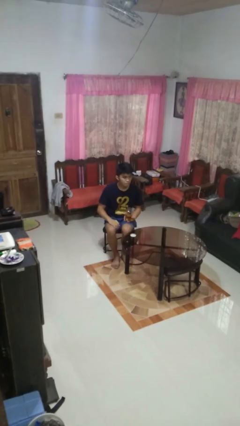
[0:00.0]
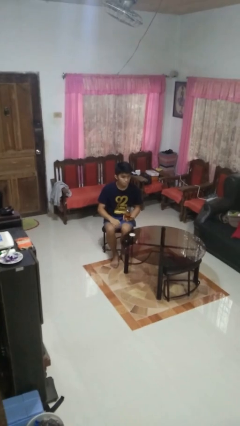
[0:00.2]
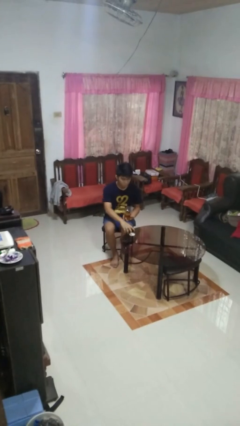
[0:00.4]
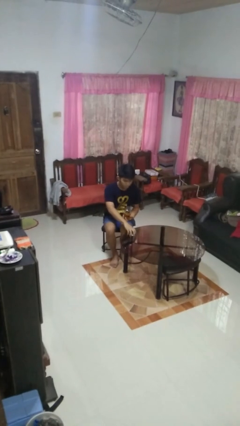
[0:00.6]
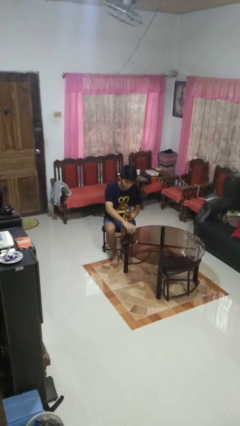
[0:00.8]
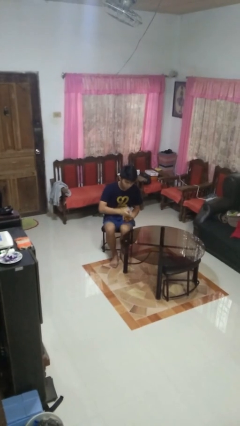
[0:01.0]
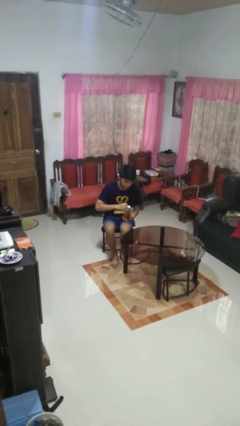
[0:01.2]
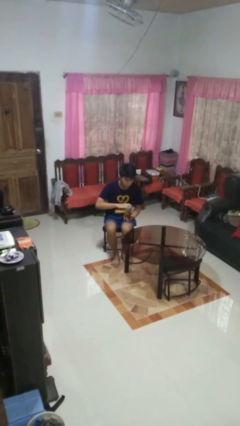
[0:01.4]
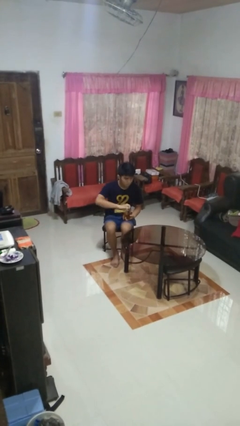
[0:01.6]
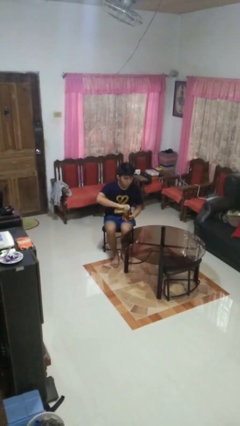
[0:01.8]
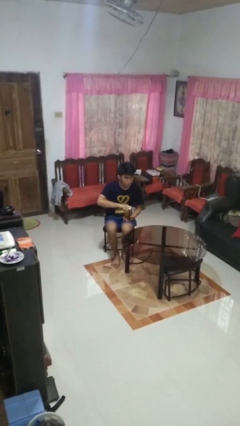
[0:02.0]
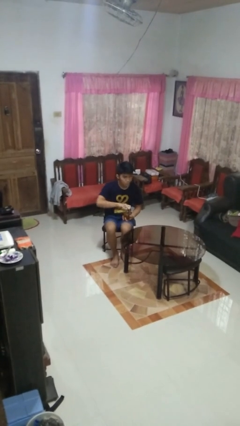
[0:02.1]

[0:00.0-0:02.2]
person closes jar

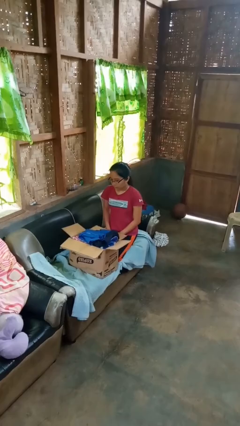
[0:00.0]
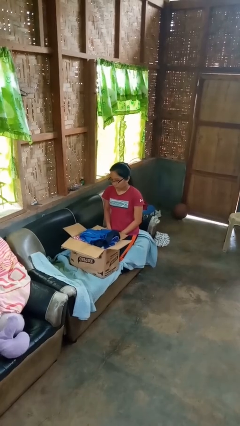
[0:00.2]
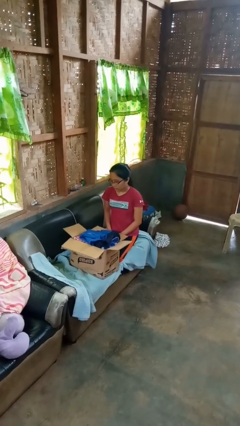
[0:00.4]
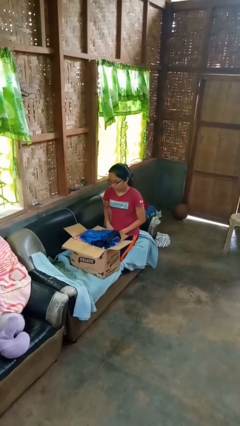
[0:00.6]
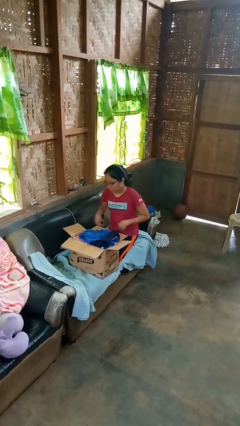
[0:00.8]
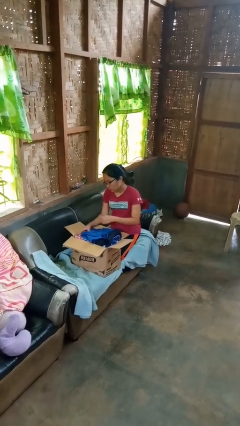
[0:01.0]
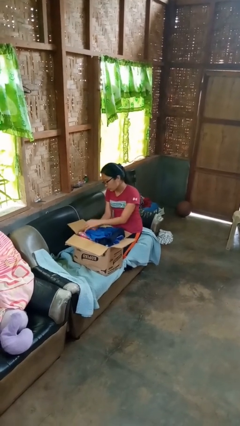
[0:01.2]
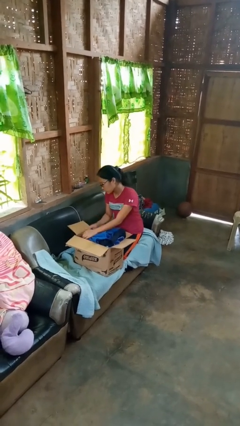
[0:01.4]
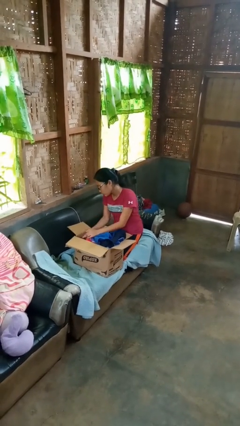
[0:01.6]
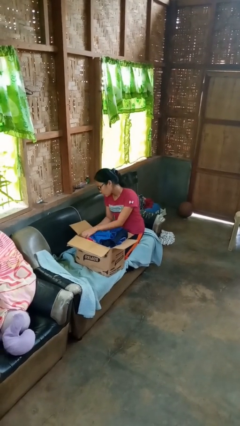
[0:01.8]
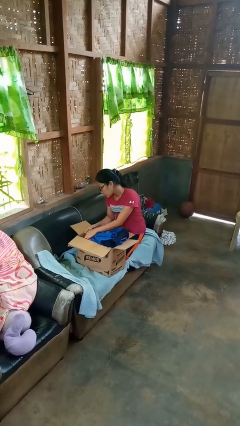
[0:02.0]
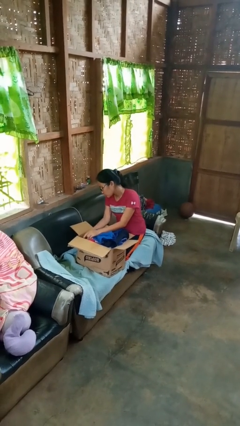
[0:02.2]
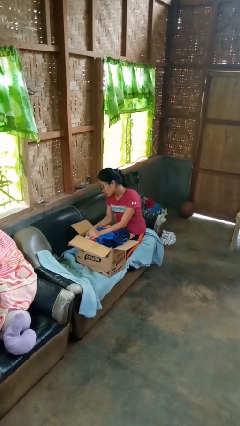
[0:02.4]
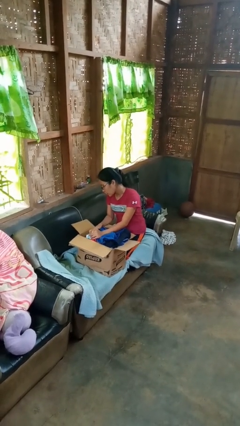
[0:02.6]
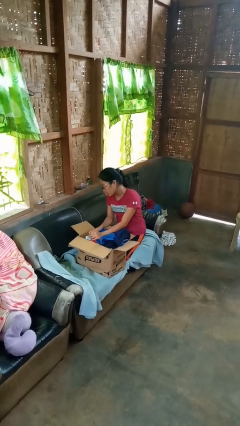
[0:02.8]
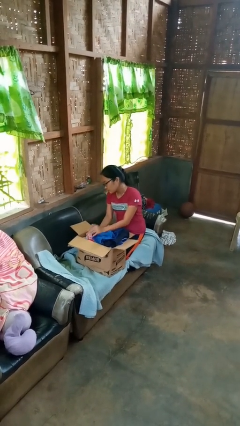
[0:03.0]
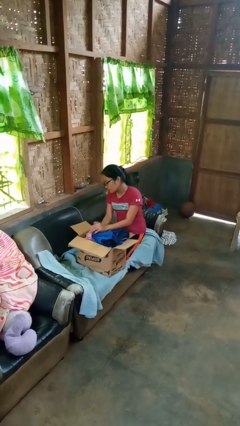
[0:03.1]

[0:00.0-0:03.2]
person searches in box

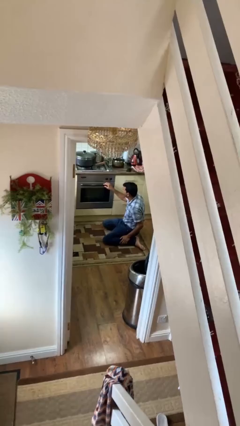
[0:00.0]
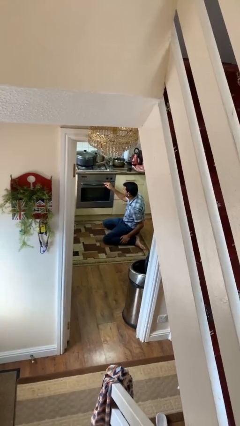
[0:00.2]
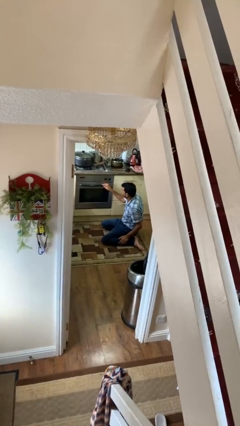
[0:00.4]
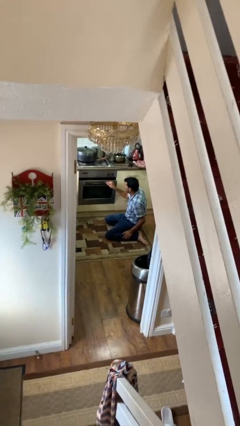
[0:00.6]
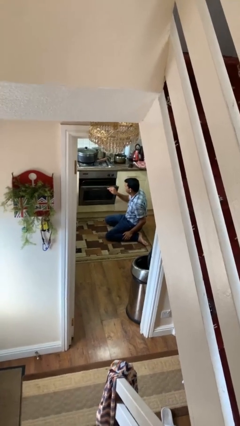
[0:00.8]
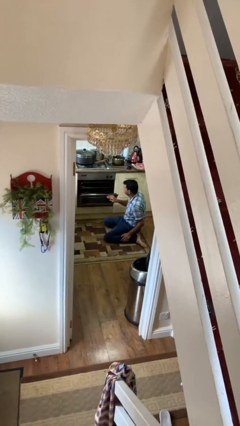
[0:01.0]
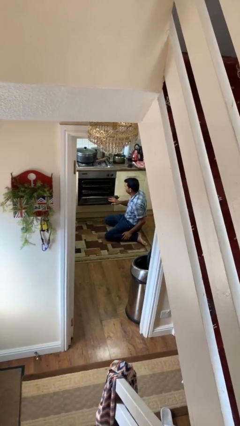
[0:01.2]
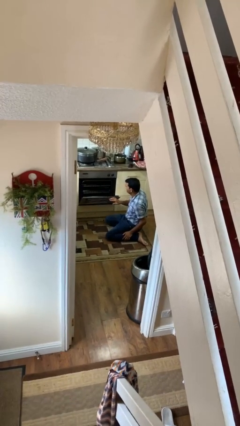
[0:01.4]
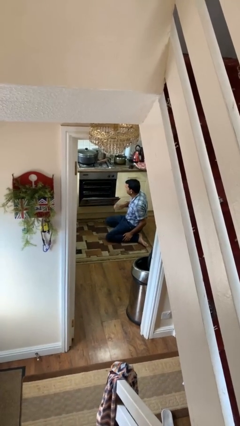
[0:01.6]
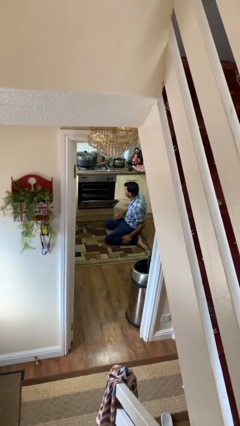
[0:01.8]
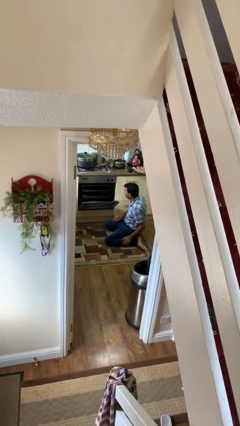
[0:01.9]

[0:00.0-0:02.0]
person opens oven door

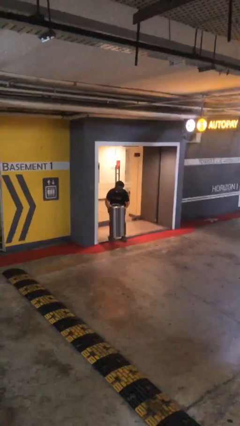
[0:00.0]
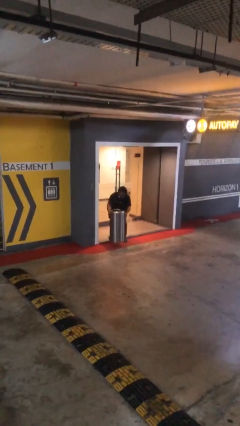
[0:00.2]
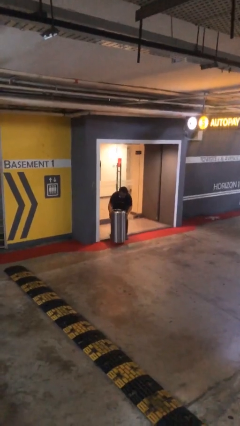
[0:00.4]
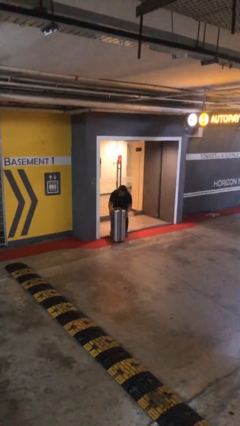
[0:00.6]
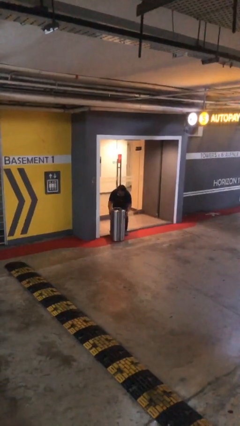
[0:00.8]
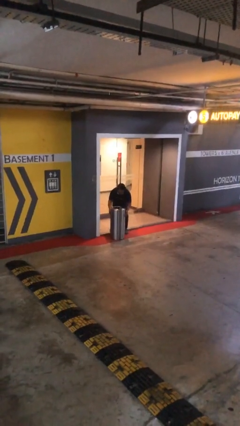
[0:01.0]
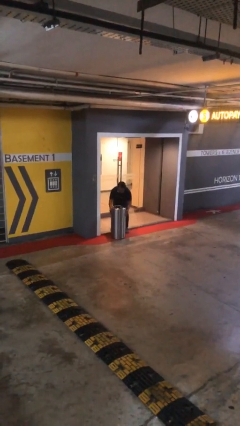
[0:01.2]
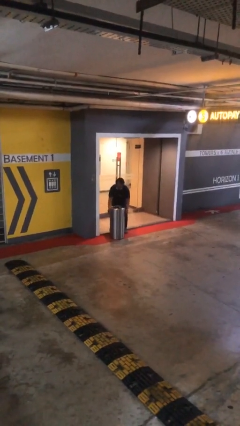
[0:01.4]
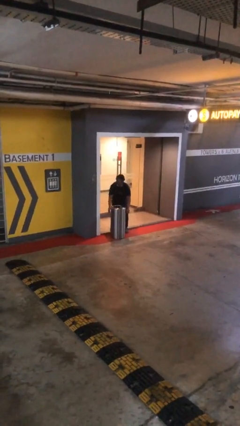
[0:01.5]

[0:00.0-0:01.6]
person puts down object on floor

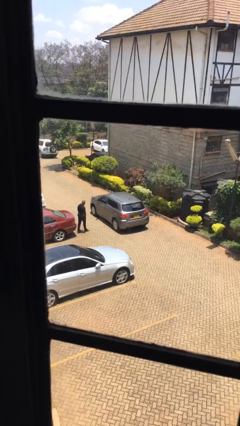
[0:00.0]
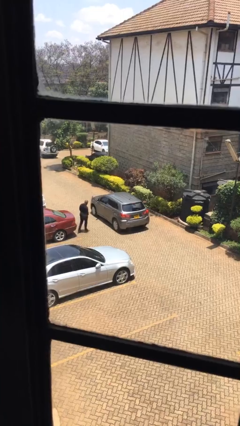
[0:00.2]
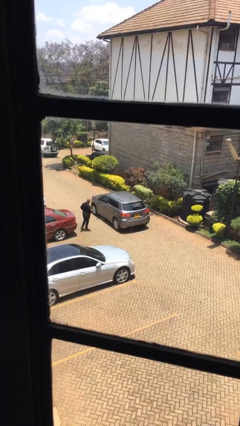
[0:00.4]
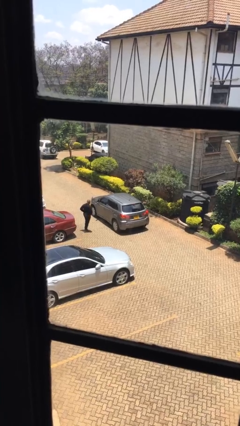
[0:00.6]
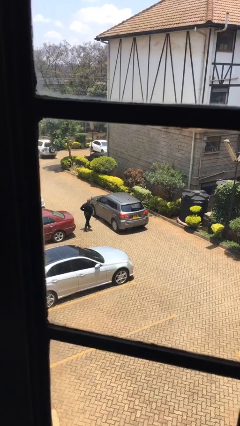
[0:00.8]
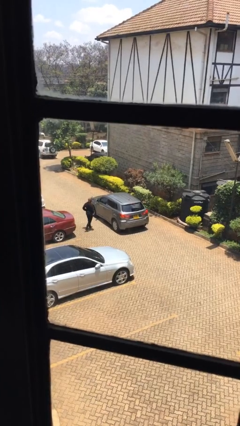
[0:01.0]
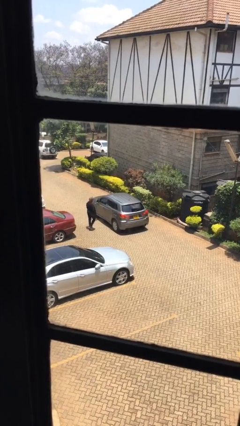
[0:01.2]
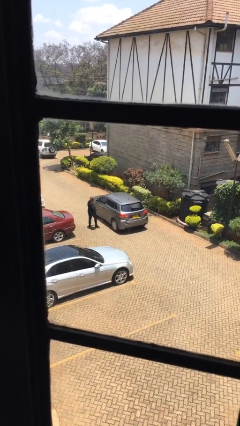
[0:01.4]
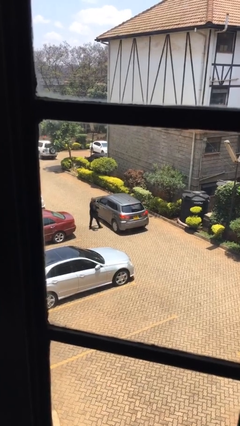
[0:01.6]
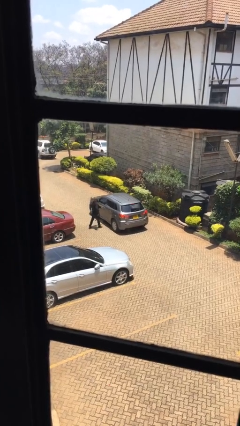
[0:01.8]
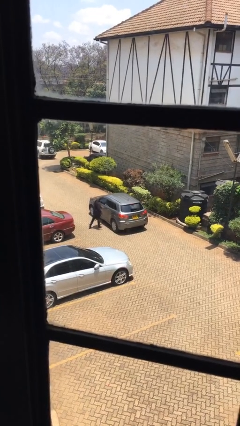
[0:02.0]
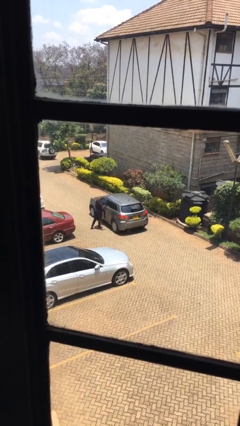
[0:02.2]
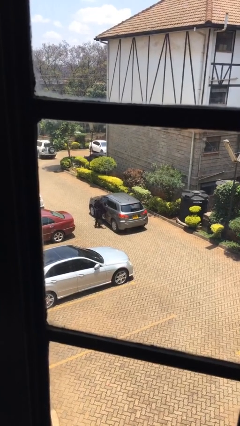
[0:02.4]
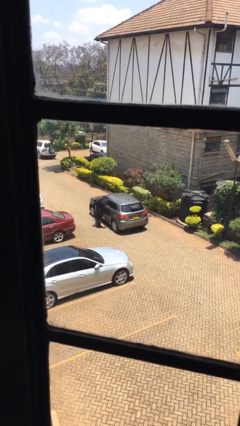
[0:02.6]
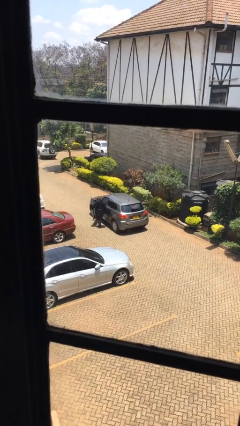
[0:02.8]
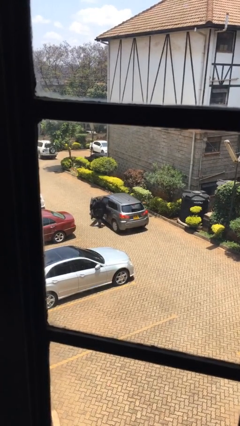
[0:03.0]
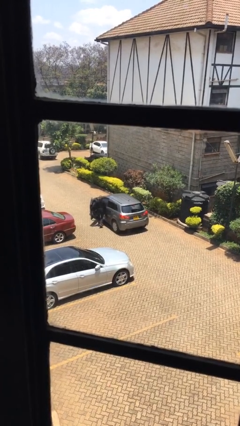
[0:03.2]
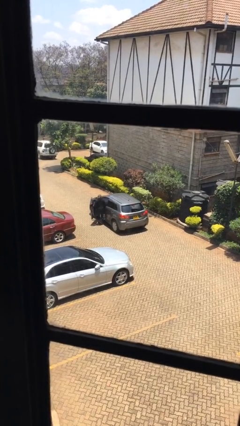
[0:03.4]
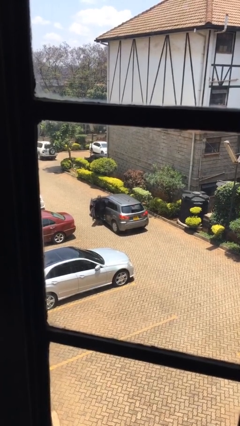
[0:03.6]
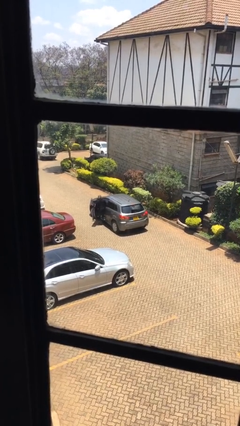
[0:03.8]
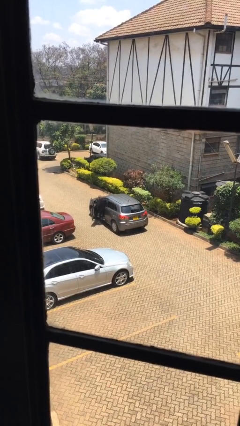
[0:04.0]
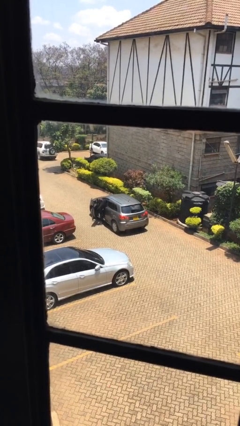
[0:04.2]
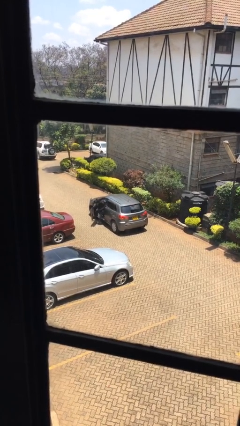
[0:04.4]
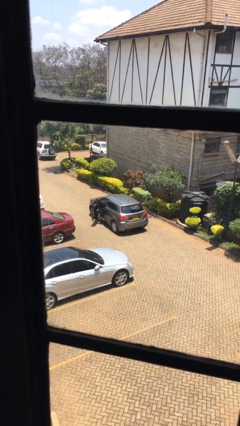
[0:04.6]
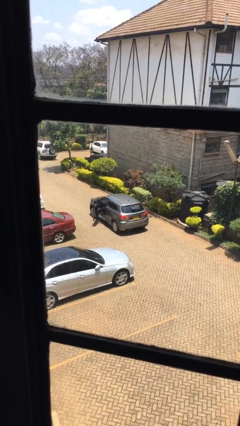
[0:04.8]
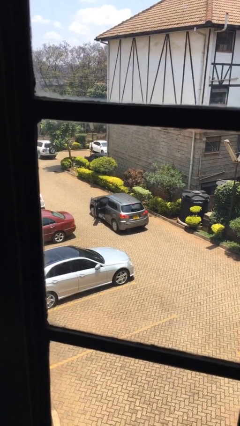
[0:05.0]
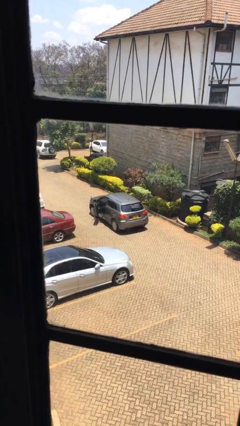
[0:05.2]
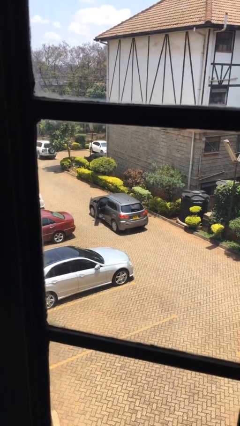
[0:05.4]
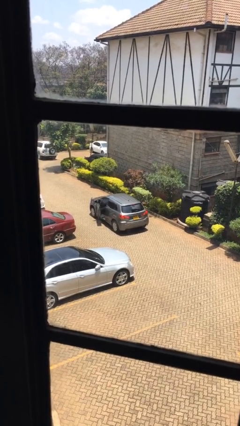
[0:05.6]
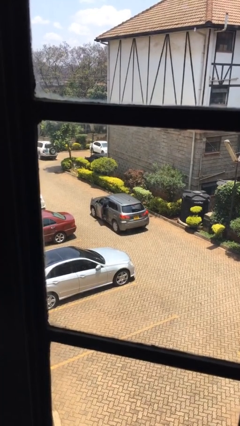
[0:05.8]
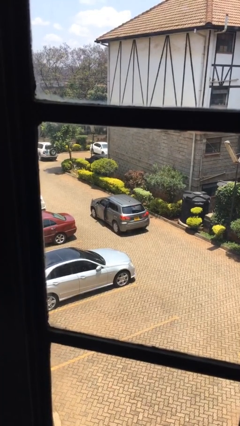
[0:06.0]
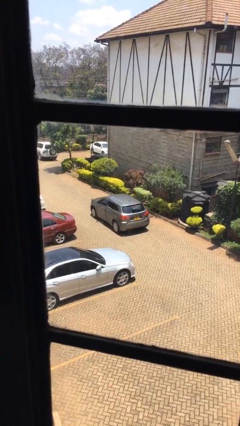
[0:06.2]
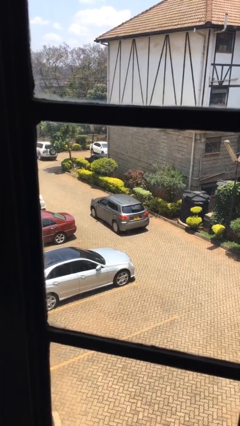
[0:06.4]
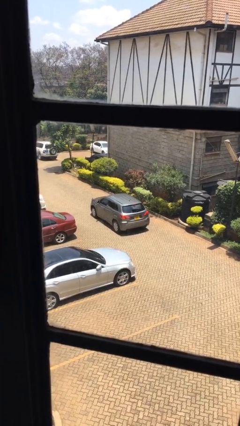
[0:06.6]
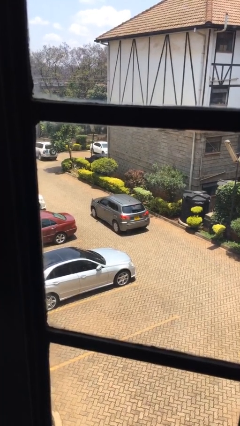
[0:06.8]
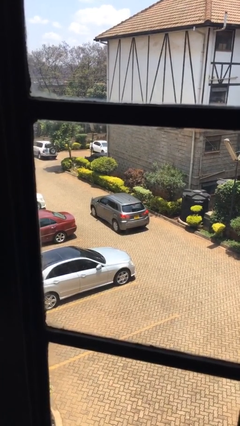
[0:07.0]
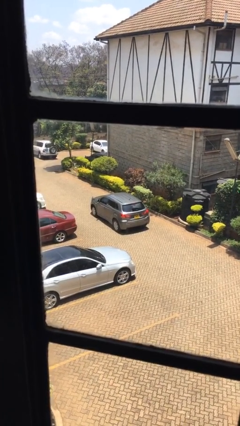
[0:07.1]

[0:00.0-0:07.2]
car picks up person

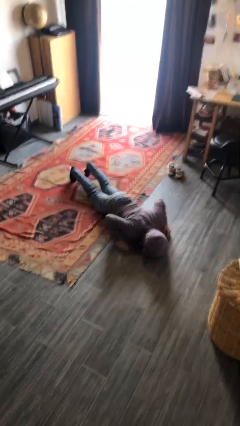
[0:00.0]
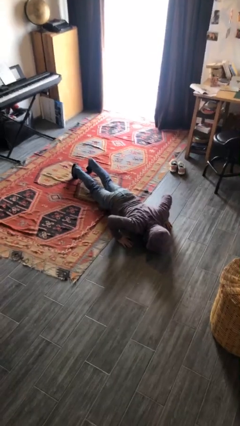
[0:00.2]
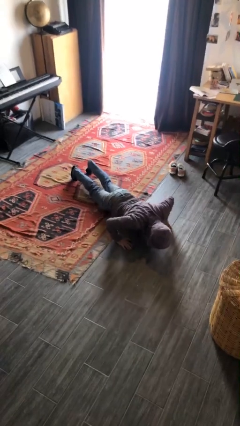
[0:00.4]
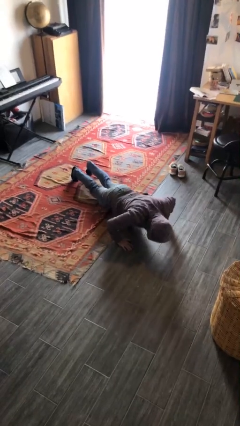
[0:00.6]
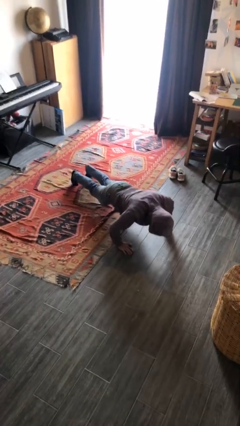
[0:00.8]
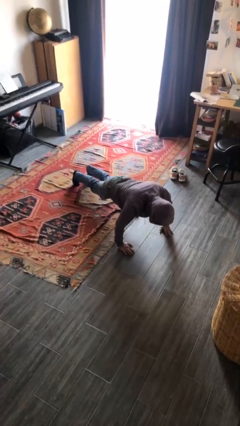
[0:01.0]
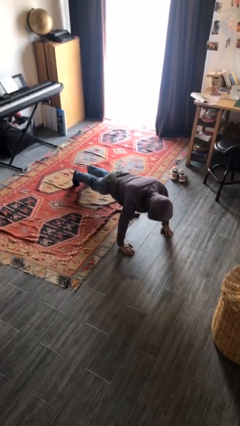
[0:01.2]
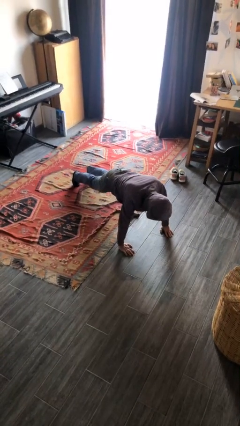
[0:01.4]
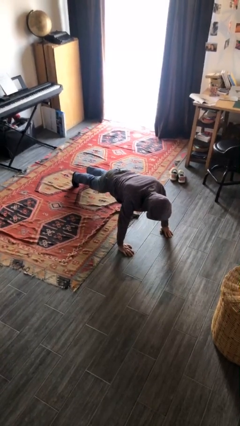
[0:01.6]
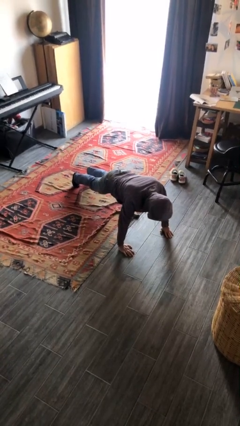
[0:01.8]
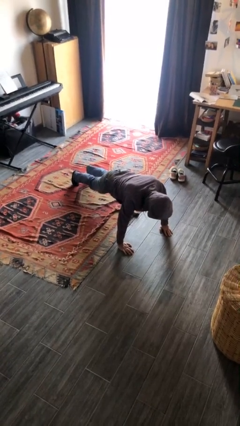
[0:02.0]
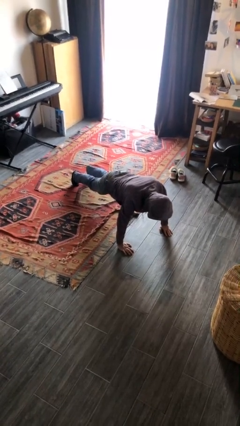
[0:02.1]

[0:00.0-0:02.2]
person exercises with pushup
